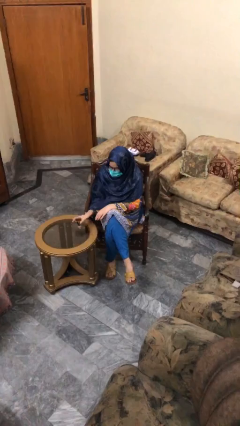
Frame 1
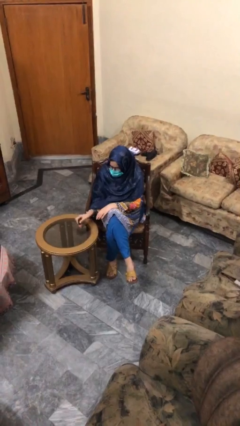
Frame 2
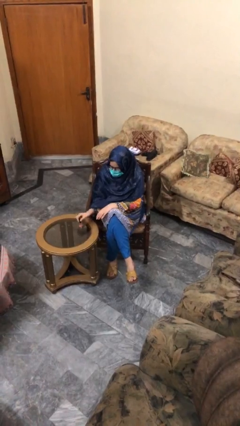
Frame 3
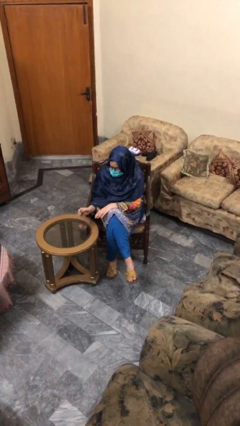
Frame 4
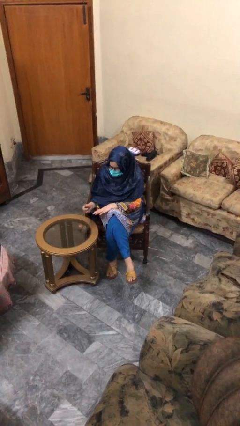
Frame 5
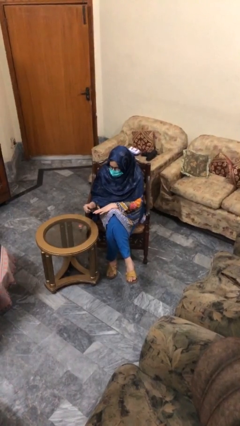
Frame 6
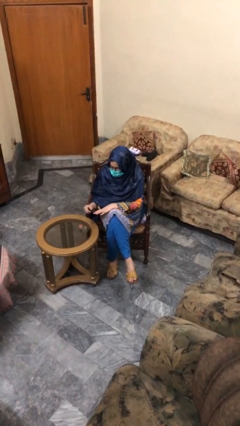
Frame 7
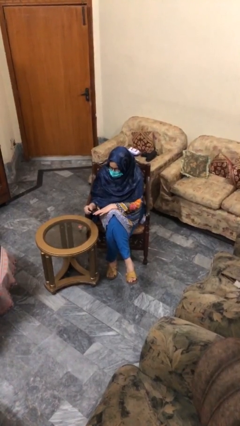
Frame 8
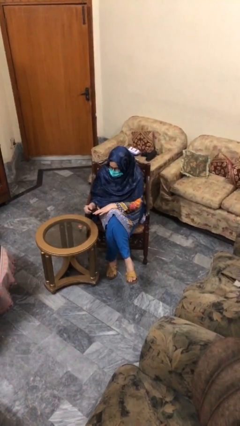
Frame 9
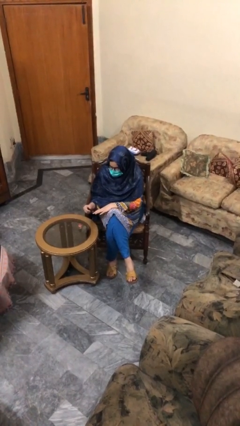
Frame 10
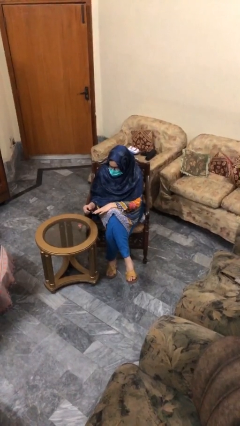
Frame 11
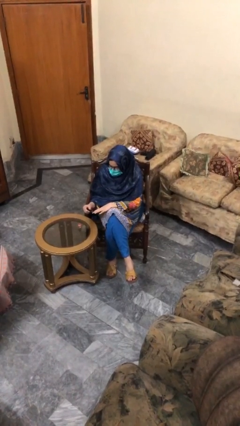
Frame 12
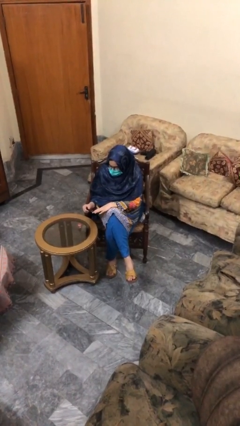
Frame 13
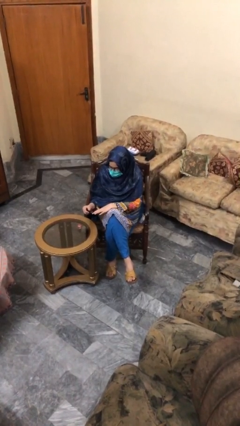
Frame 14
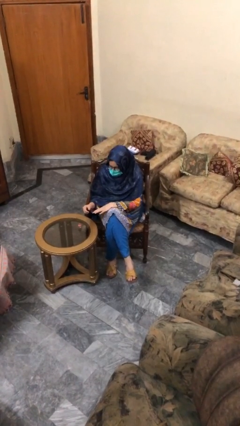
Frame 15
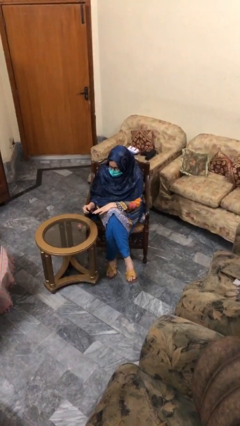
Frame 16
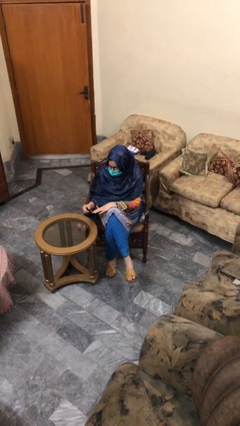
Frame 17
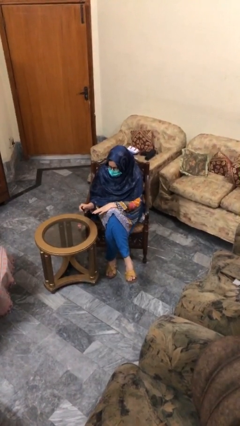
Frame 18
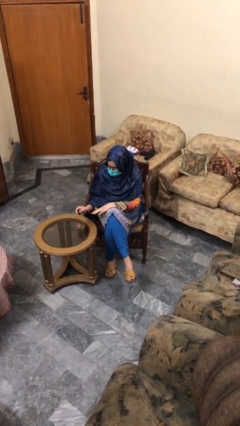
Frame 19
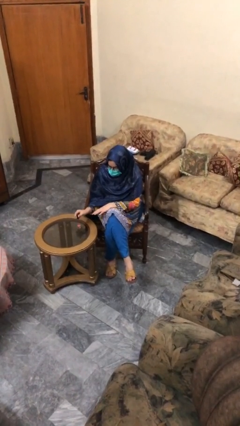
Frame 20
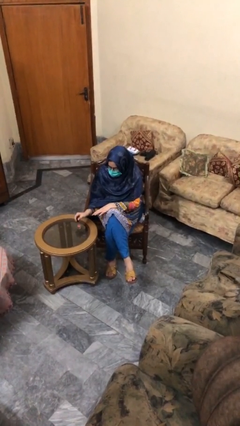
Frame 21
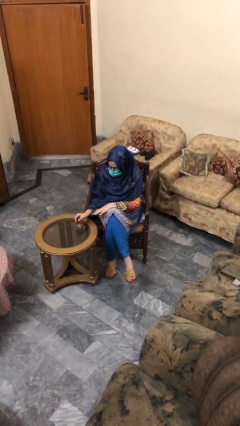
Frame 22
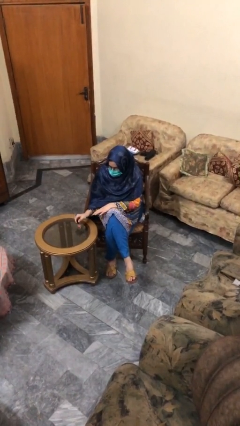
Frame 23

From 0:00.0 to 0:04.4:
person paints fingernails

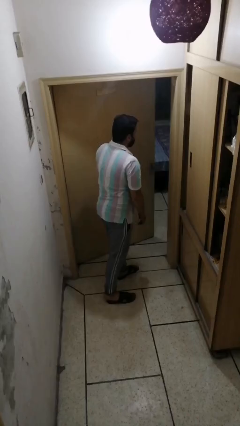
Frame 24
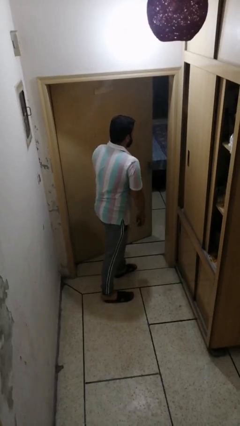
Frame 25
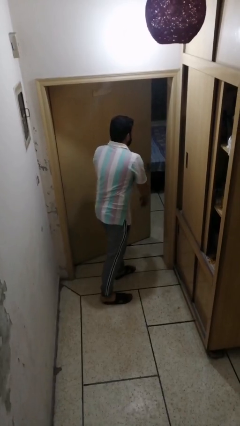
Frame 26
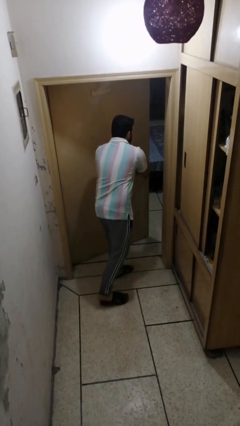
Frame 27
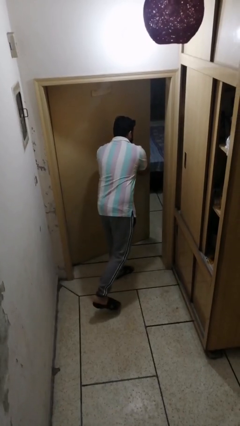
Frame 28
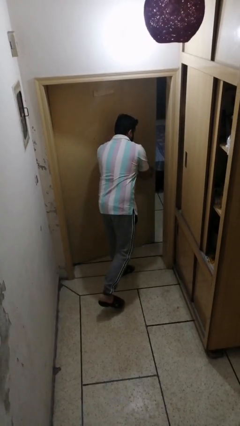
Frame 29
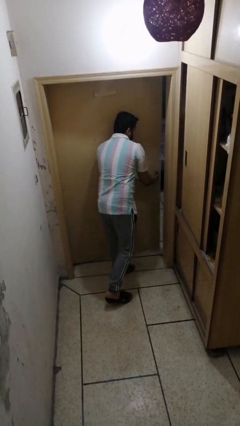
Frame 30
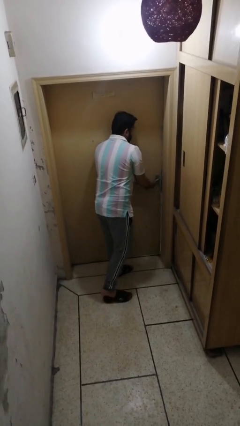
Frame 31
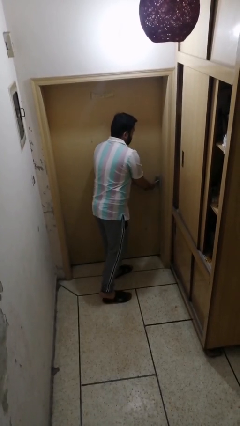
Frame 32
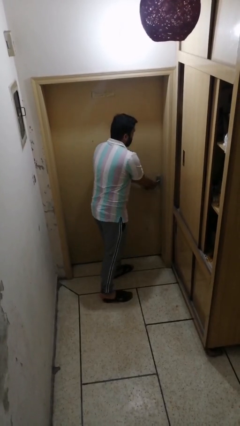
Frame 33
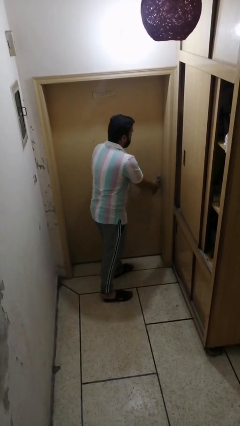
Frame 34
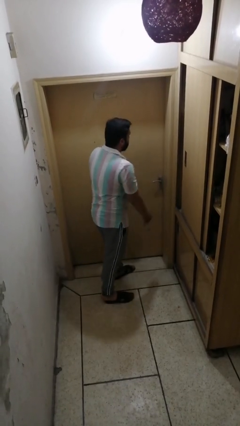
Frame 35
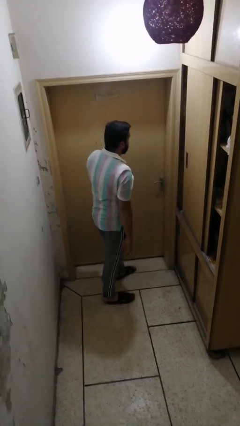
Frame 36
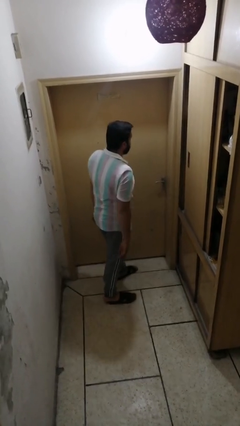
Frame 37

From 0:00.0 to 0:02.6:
person closes facility door

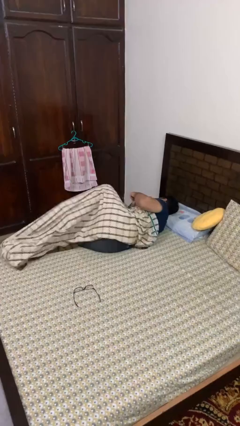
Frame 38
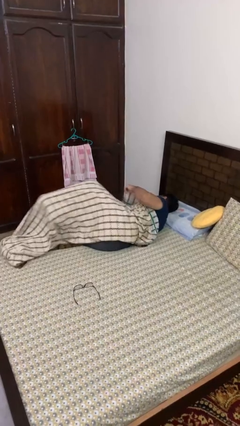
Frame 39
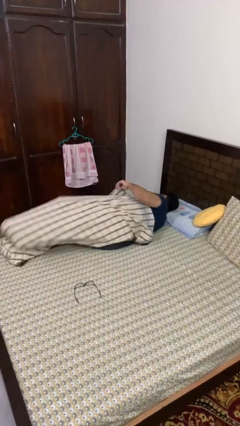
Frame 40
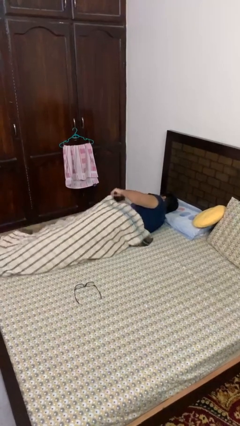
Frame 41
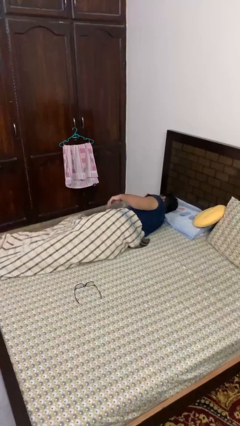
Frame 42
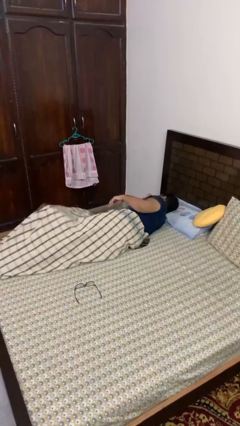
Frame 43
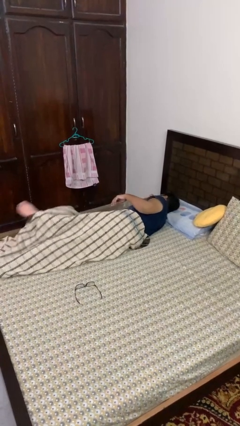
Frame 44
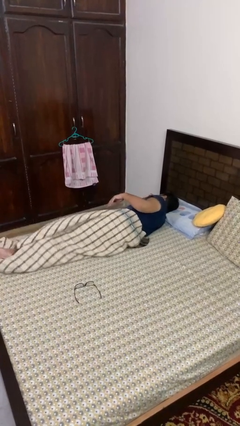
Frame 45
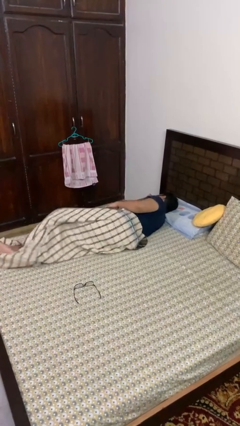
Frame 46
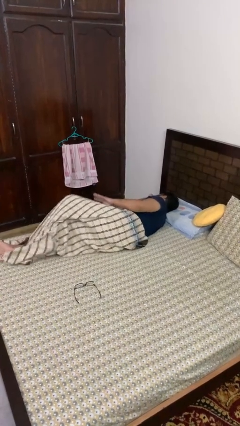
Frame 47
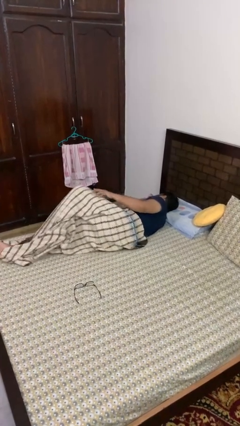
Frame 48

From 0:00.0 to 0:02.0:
person uncovers with bedsheets

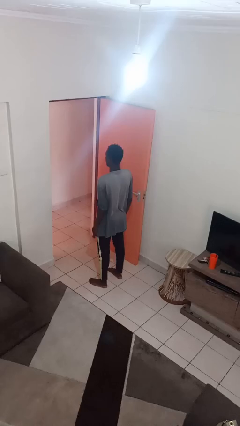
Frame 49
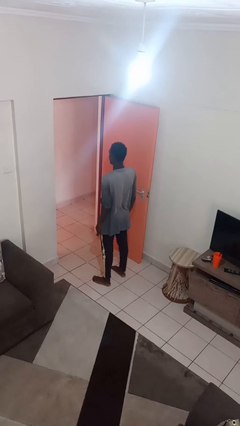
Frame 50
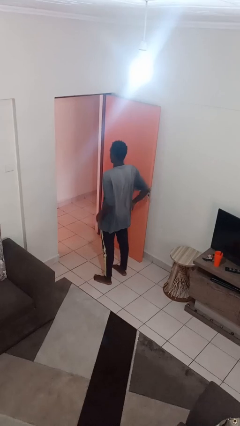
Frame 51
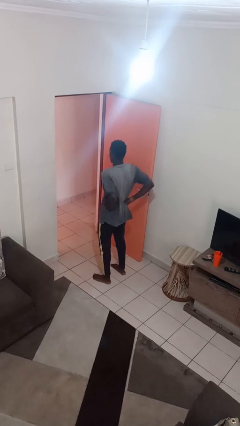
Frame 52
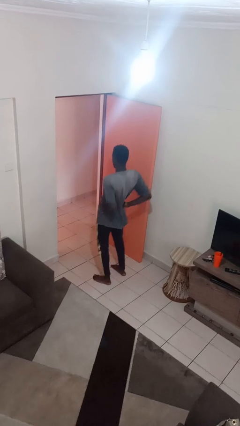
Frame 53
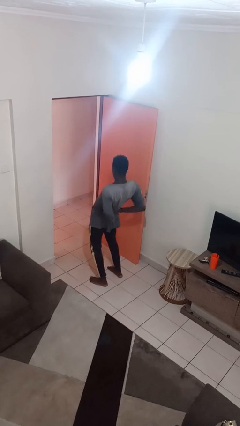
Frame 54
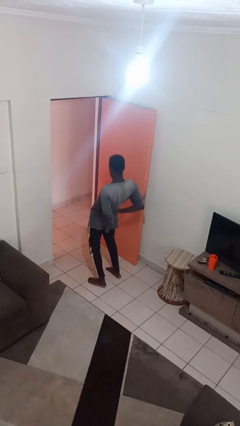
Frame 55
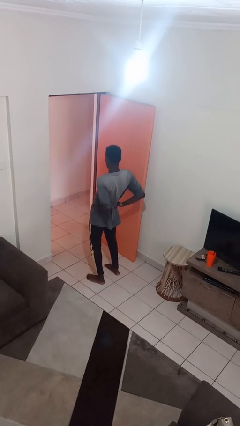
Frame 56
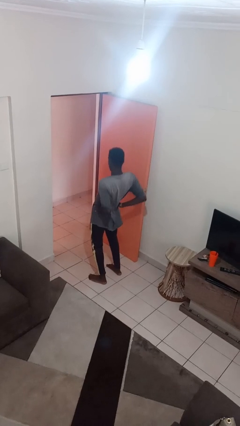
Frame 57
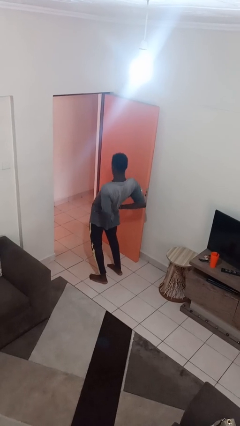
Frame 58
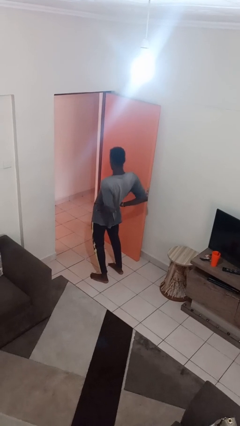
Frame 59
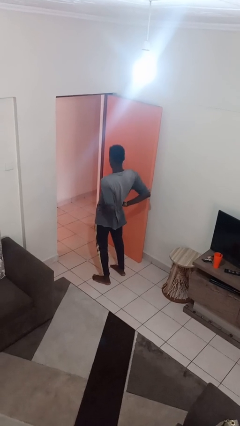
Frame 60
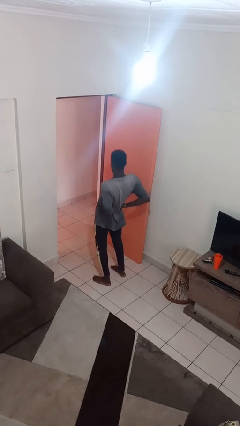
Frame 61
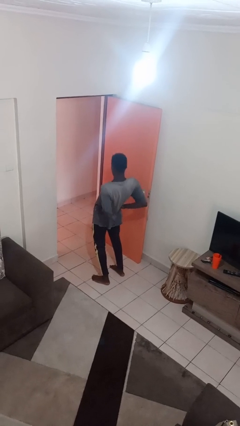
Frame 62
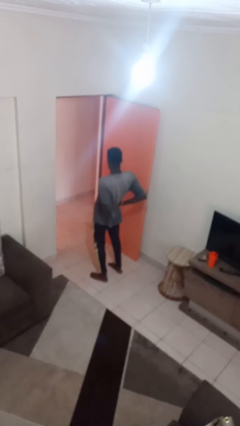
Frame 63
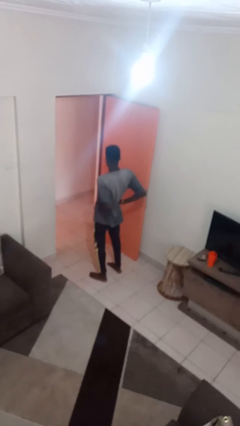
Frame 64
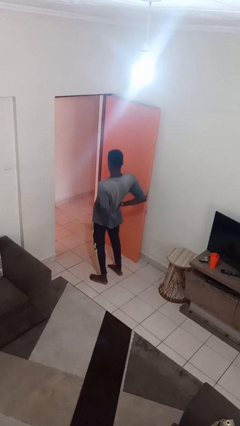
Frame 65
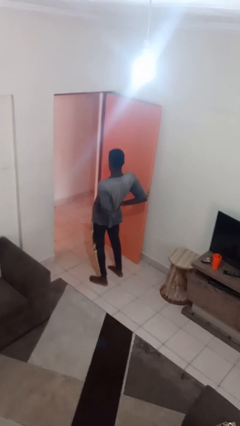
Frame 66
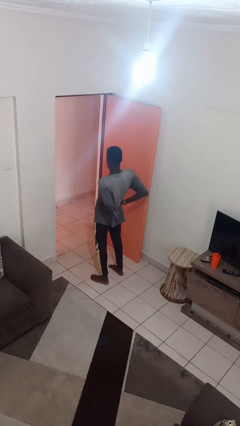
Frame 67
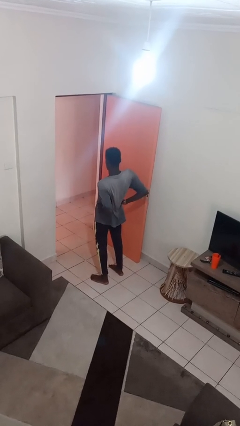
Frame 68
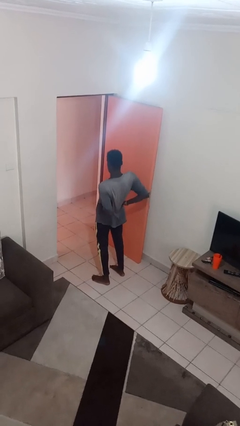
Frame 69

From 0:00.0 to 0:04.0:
person stretches back

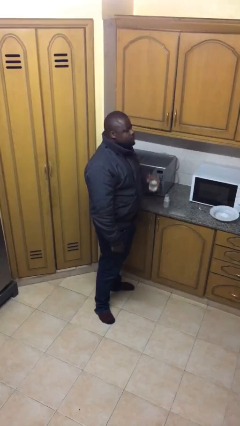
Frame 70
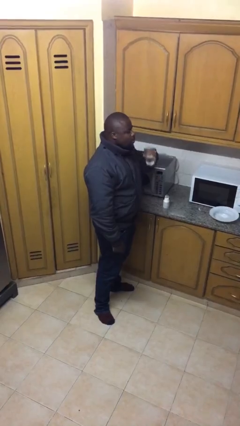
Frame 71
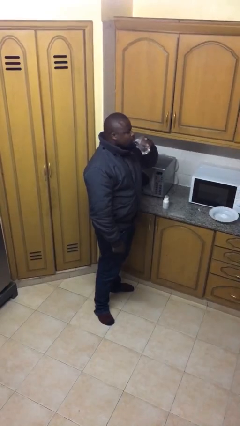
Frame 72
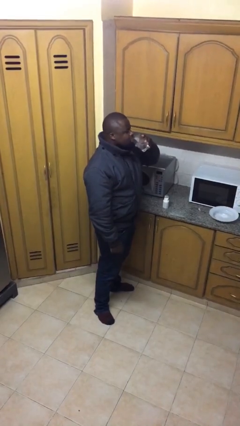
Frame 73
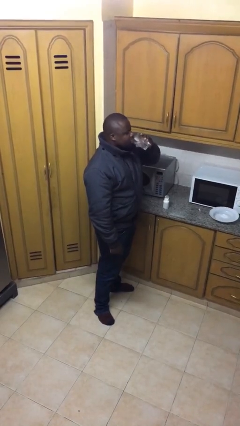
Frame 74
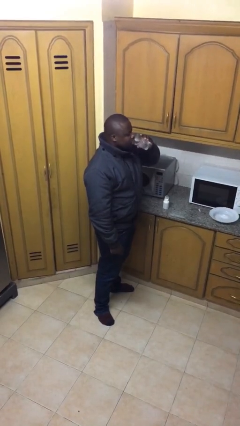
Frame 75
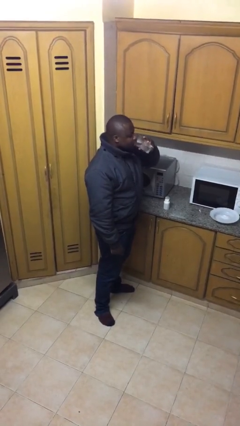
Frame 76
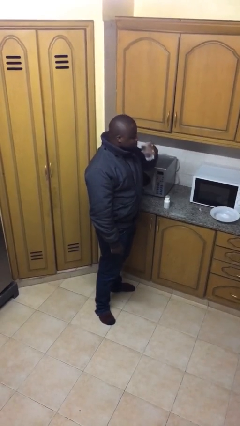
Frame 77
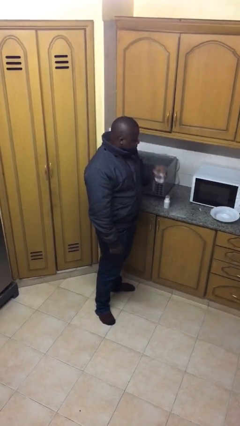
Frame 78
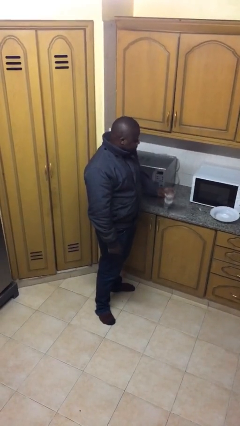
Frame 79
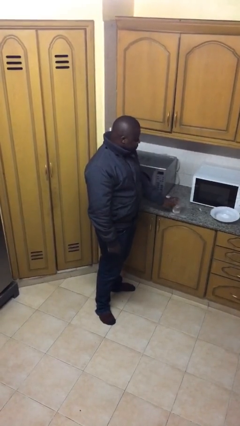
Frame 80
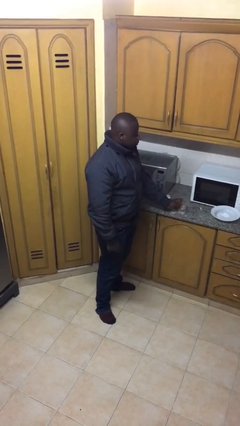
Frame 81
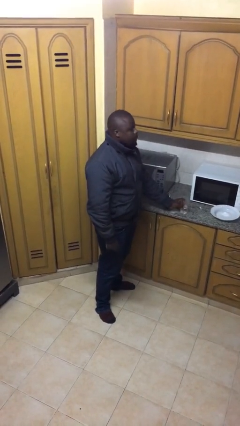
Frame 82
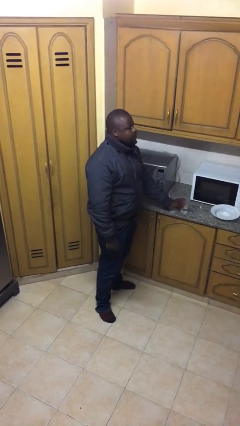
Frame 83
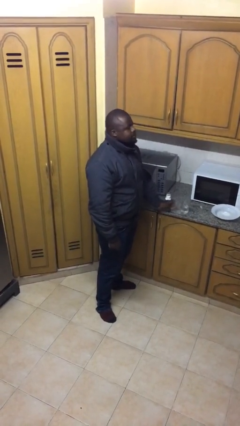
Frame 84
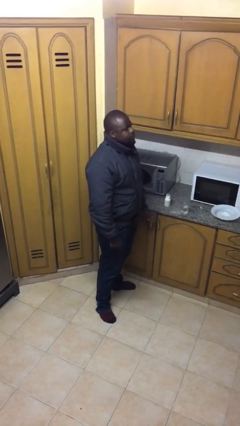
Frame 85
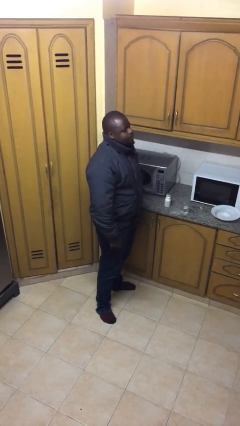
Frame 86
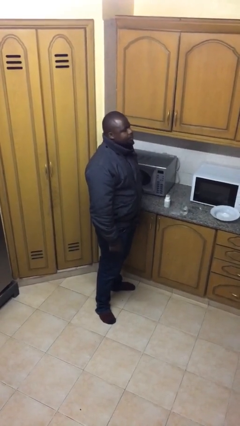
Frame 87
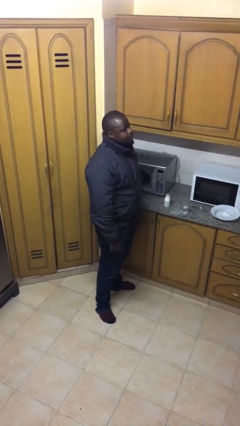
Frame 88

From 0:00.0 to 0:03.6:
person drinks from cup

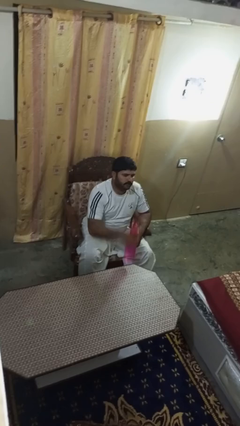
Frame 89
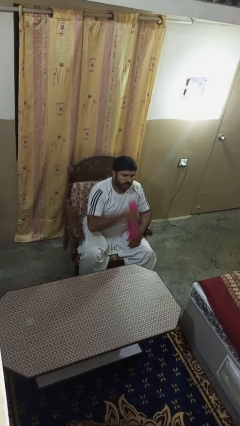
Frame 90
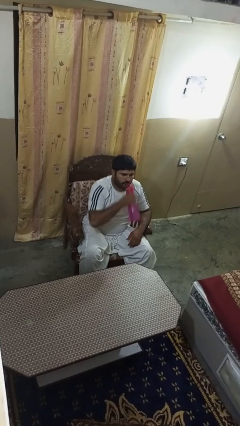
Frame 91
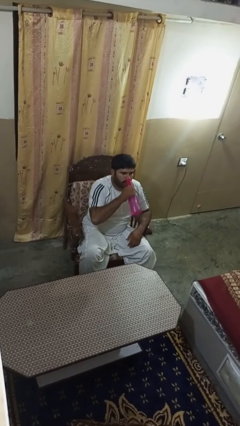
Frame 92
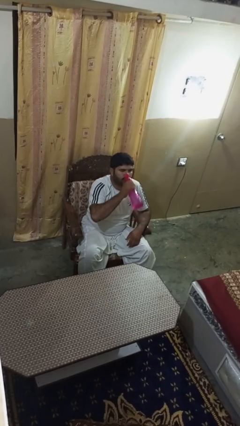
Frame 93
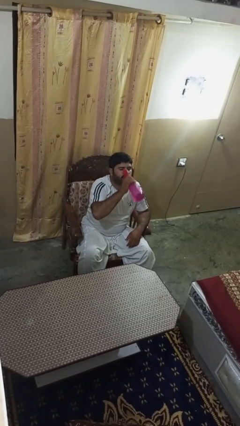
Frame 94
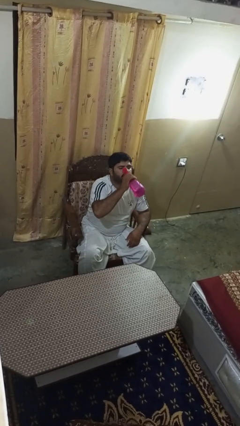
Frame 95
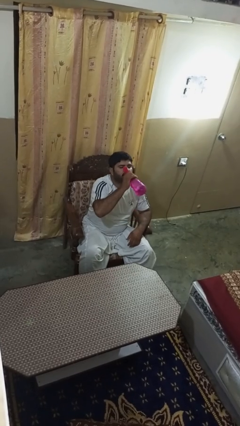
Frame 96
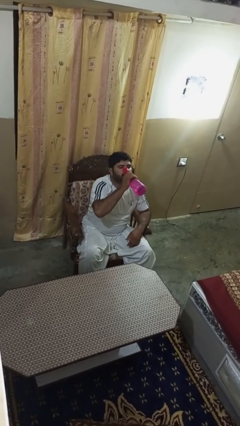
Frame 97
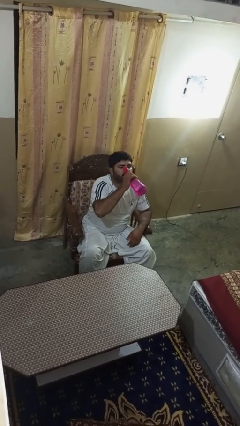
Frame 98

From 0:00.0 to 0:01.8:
person drinks from bottle
